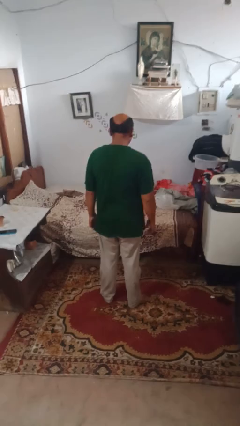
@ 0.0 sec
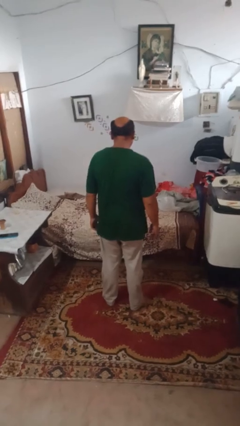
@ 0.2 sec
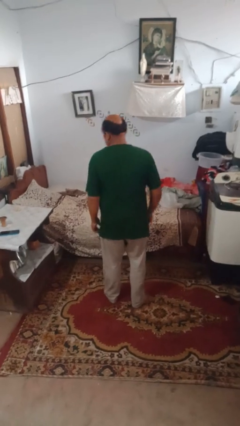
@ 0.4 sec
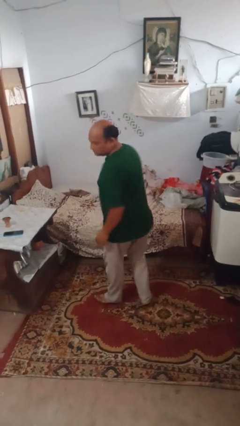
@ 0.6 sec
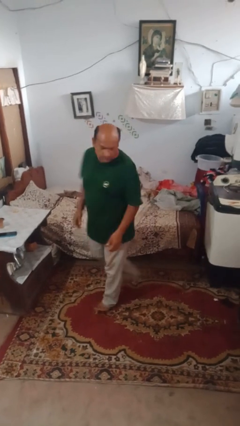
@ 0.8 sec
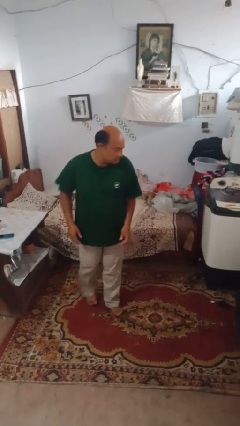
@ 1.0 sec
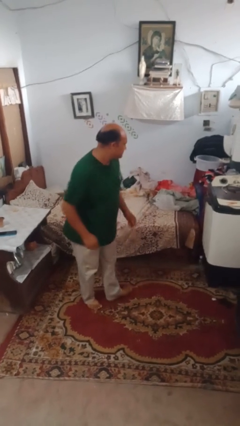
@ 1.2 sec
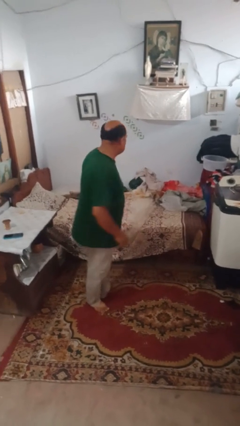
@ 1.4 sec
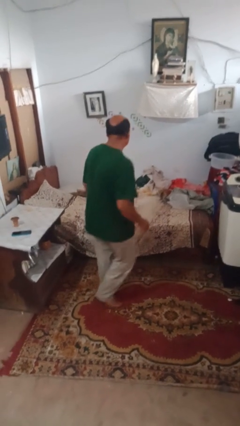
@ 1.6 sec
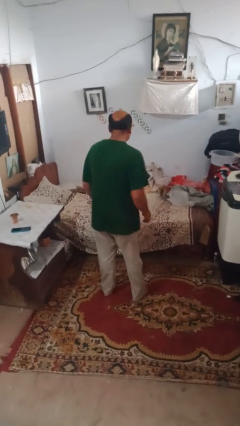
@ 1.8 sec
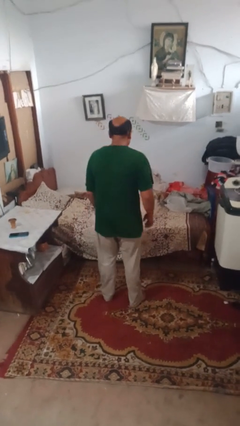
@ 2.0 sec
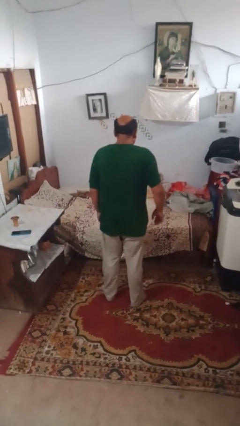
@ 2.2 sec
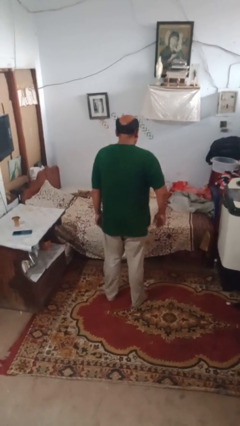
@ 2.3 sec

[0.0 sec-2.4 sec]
person twirls

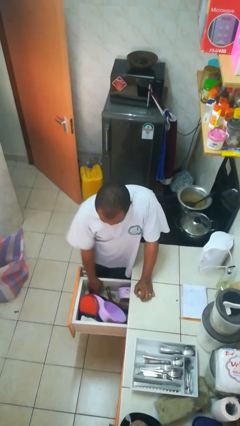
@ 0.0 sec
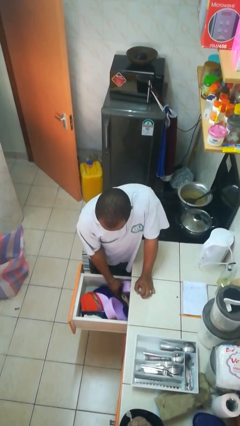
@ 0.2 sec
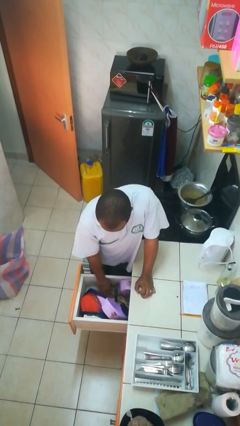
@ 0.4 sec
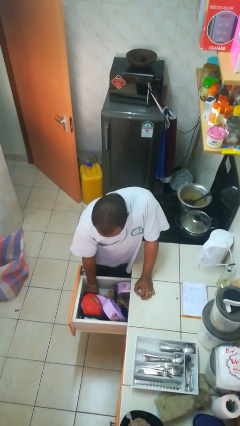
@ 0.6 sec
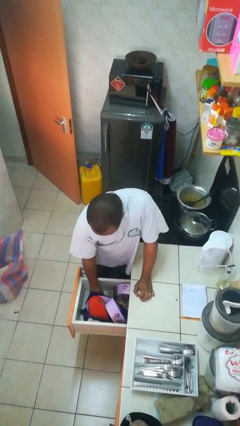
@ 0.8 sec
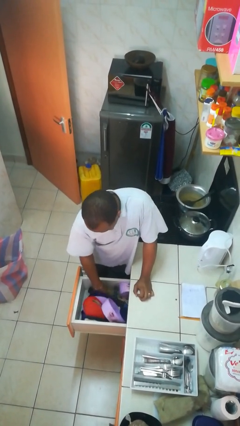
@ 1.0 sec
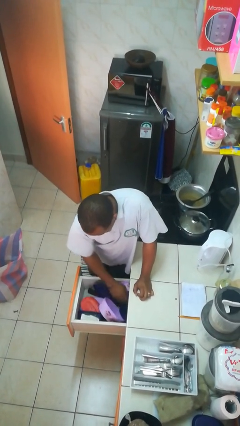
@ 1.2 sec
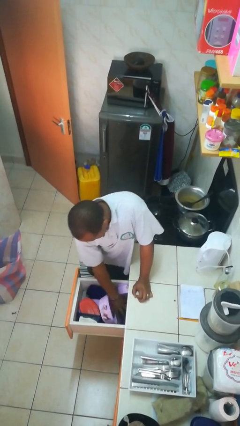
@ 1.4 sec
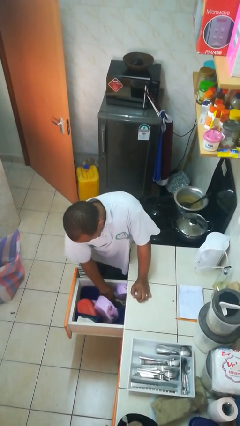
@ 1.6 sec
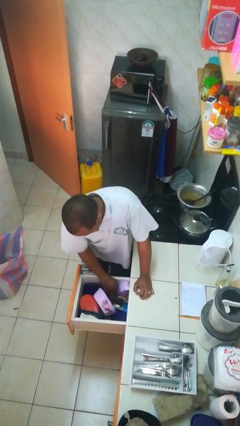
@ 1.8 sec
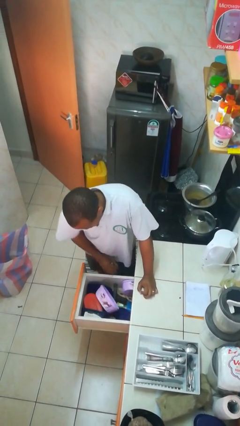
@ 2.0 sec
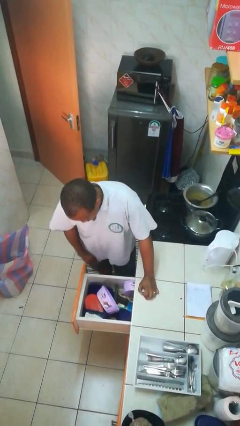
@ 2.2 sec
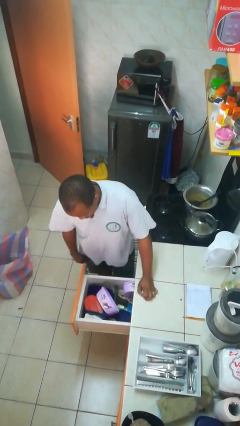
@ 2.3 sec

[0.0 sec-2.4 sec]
person searches in kitchen drawer

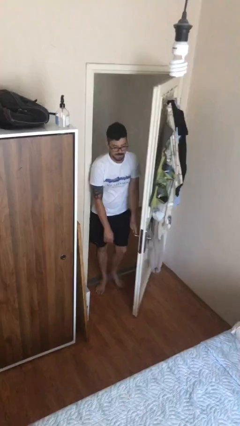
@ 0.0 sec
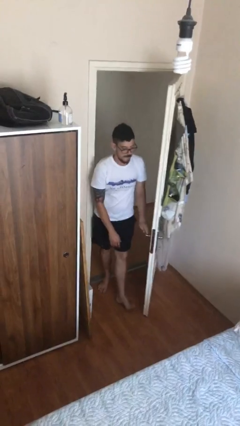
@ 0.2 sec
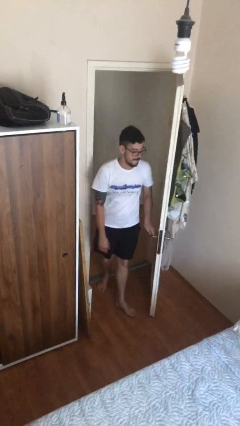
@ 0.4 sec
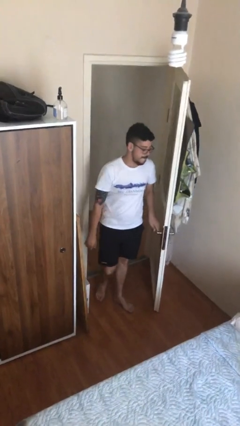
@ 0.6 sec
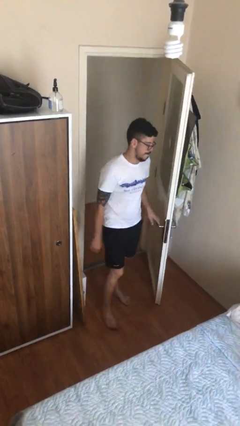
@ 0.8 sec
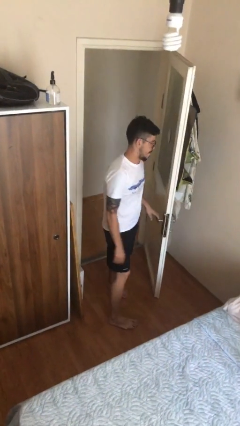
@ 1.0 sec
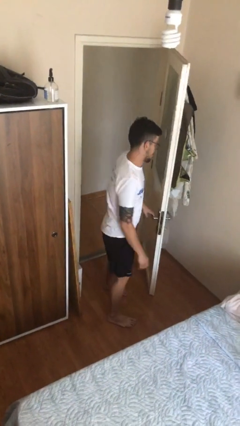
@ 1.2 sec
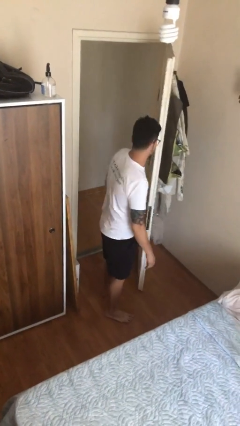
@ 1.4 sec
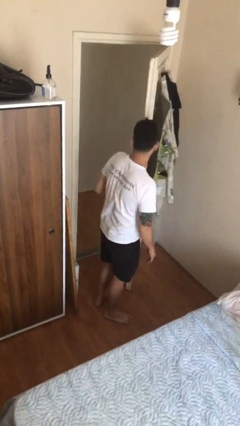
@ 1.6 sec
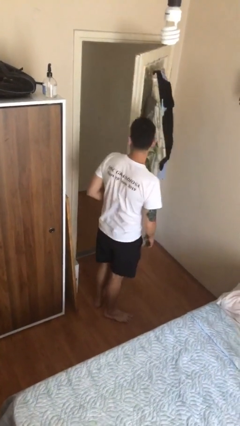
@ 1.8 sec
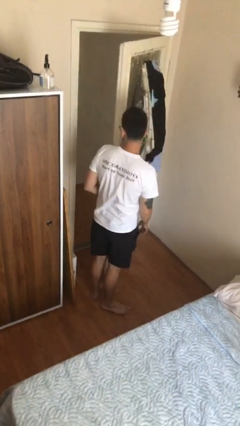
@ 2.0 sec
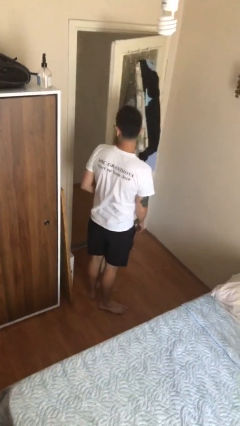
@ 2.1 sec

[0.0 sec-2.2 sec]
person enters scene through structure

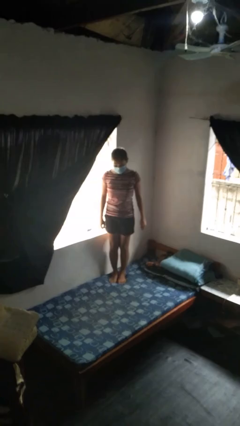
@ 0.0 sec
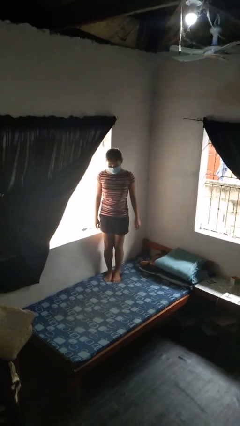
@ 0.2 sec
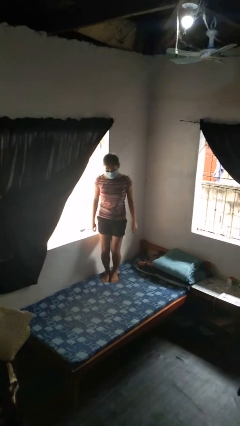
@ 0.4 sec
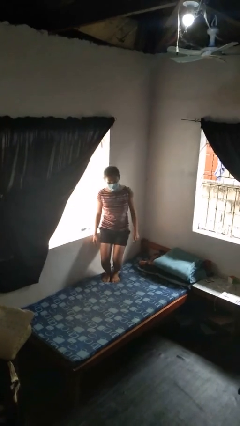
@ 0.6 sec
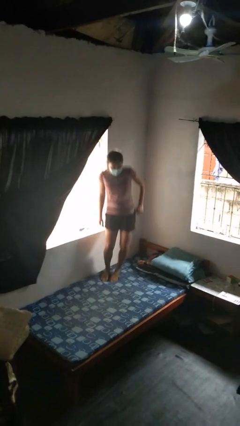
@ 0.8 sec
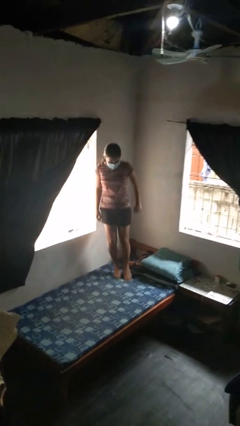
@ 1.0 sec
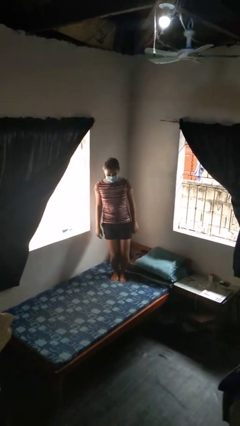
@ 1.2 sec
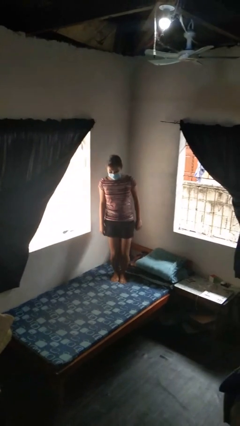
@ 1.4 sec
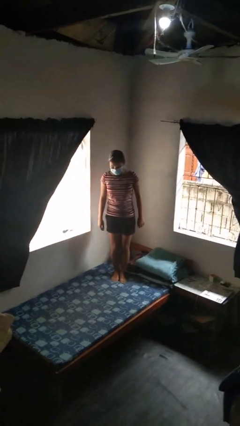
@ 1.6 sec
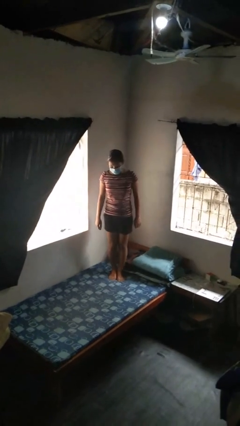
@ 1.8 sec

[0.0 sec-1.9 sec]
person jumps on bed

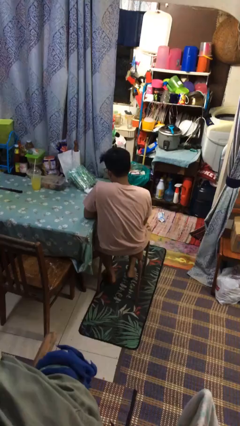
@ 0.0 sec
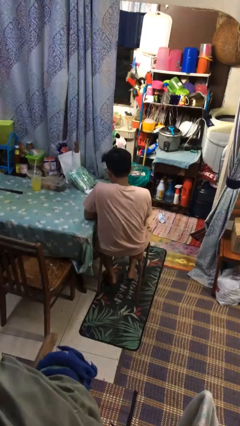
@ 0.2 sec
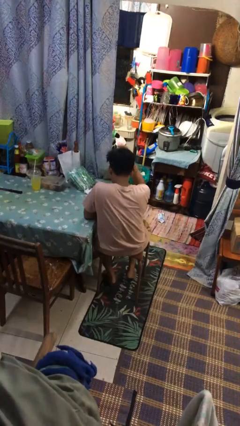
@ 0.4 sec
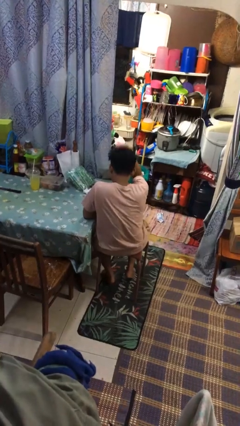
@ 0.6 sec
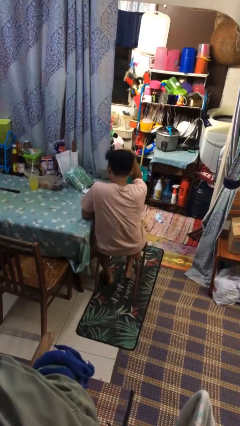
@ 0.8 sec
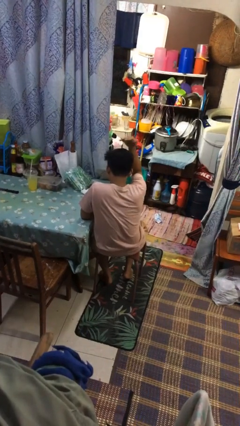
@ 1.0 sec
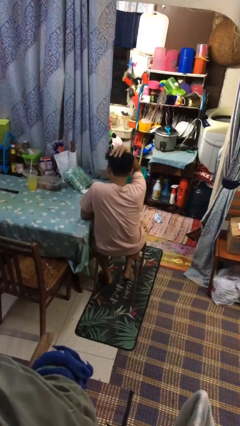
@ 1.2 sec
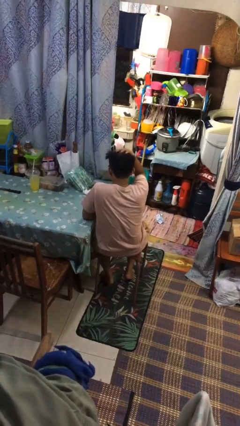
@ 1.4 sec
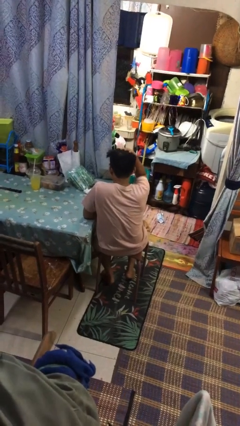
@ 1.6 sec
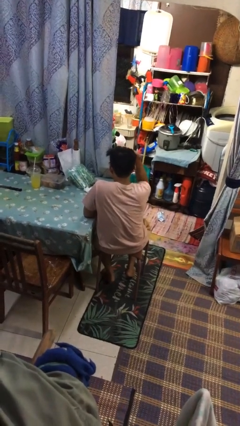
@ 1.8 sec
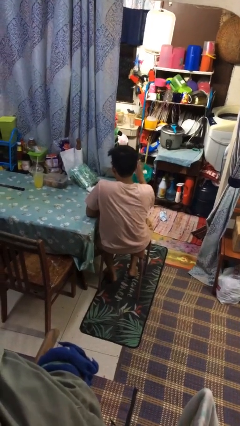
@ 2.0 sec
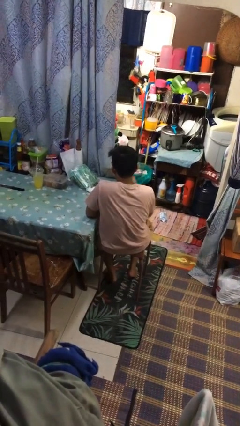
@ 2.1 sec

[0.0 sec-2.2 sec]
person pats head

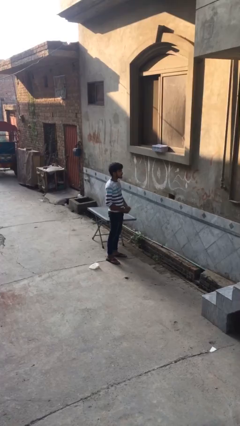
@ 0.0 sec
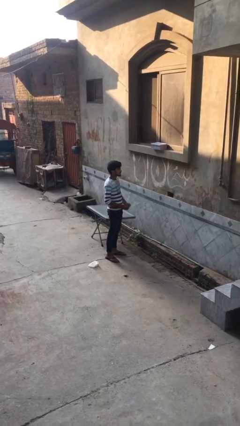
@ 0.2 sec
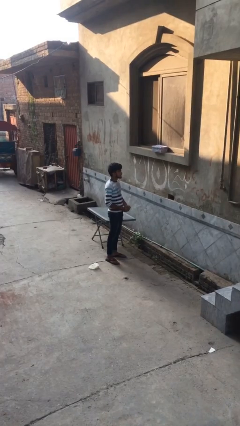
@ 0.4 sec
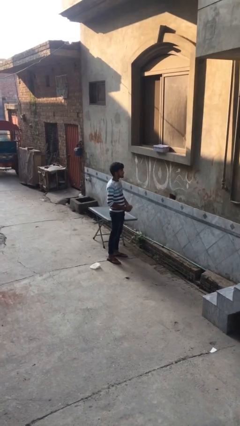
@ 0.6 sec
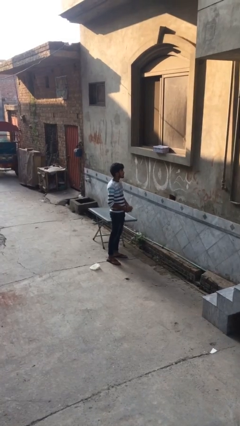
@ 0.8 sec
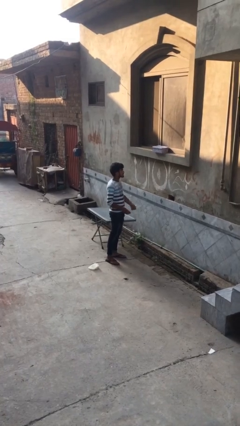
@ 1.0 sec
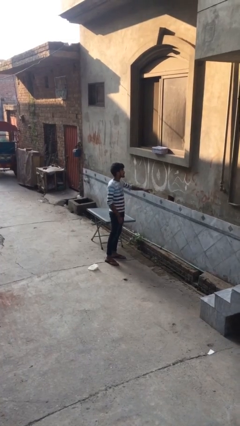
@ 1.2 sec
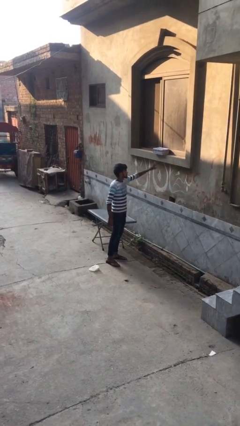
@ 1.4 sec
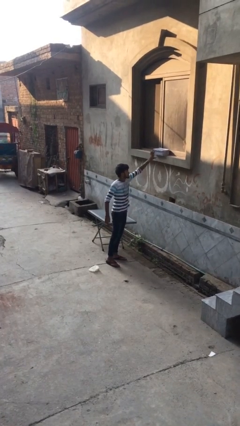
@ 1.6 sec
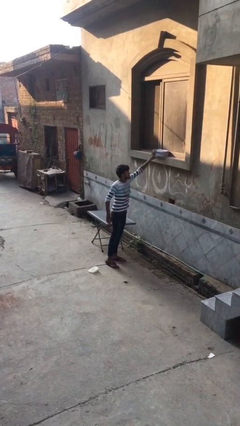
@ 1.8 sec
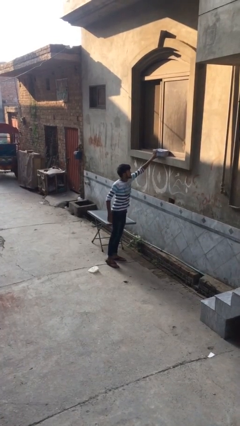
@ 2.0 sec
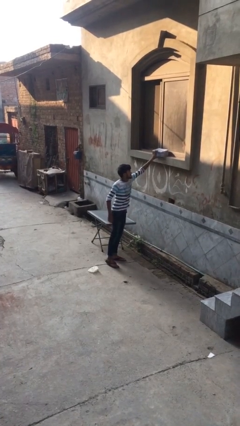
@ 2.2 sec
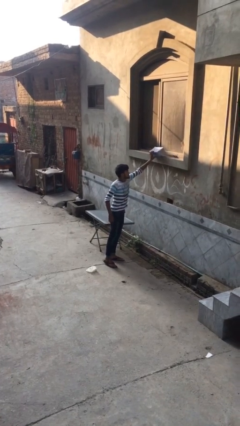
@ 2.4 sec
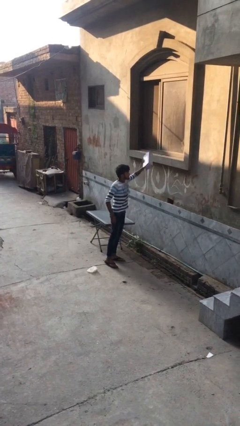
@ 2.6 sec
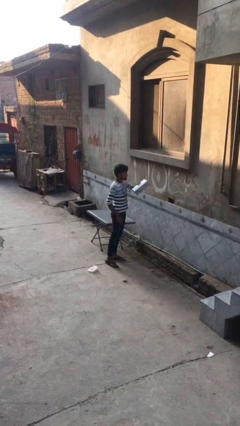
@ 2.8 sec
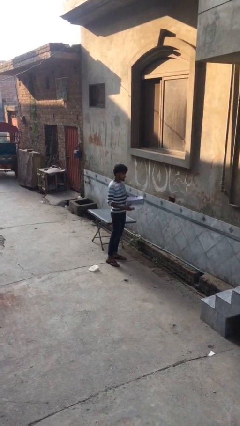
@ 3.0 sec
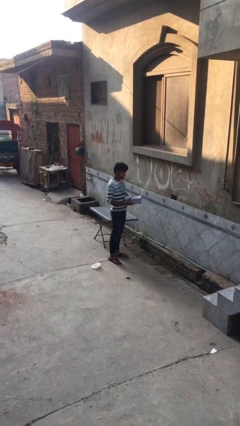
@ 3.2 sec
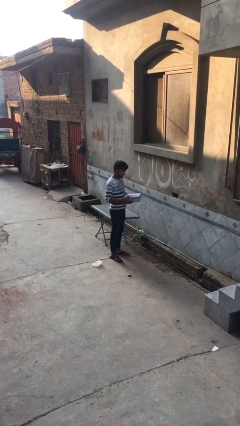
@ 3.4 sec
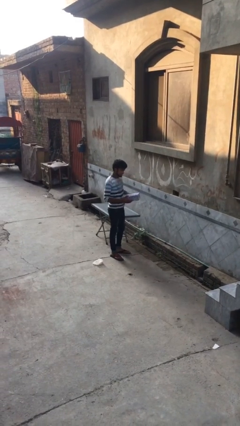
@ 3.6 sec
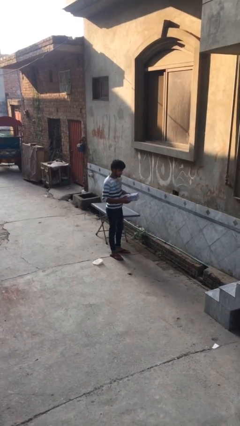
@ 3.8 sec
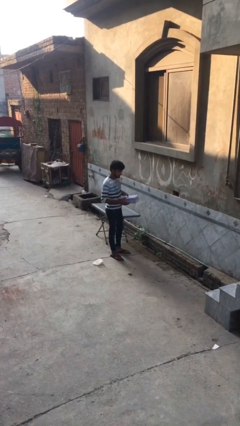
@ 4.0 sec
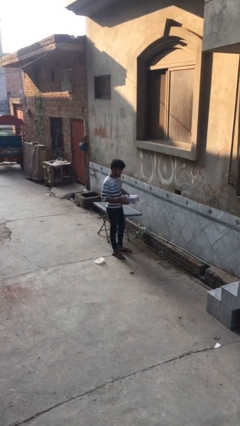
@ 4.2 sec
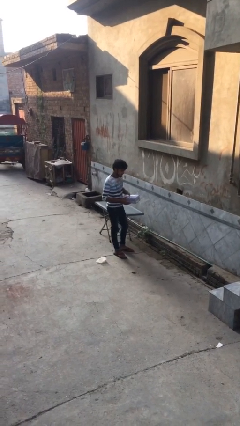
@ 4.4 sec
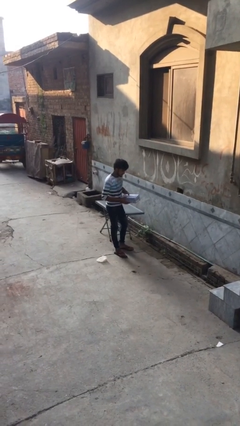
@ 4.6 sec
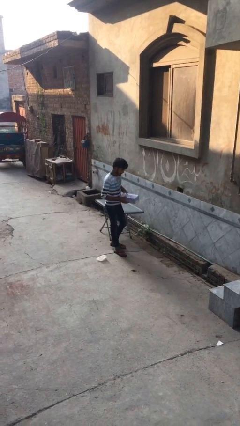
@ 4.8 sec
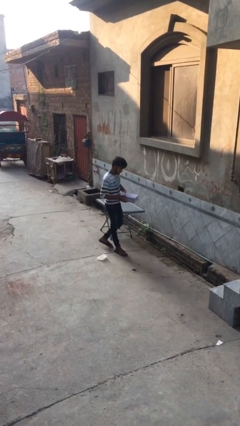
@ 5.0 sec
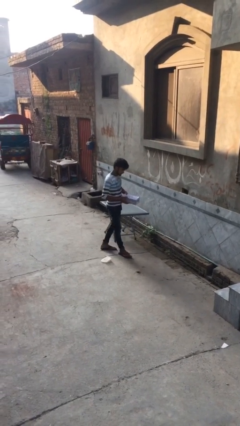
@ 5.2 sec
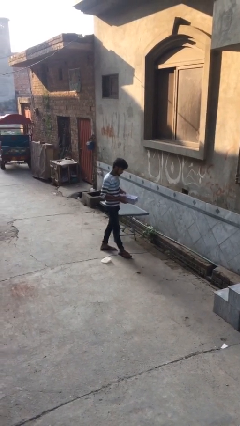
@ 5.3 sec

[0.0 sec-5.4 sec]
person picks up object from shelf

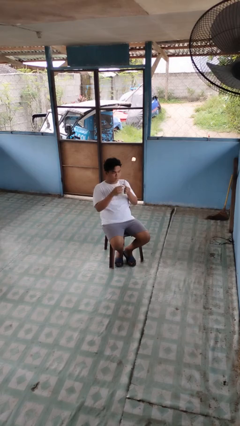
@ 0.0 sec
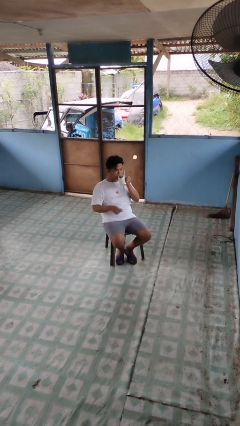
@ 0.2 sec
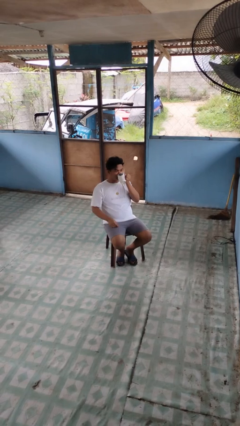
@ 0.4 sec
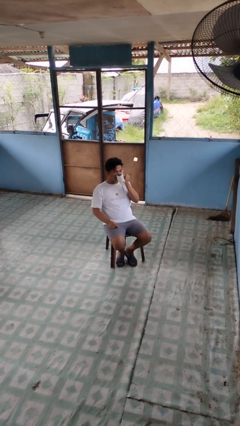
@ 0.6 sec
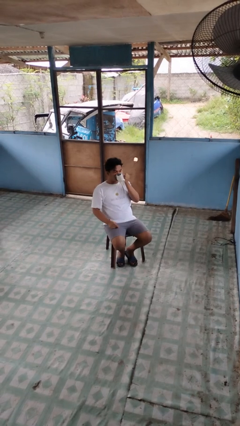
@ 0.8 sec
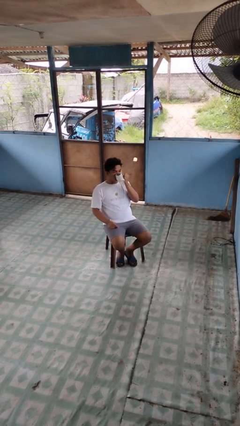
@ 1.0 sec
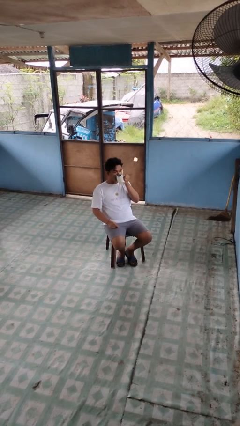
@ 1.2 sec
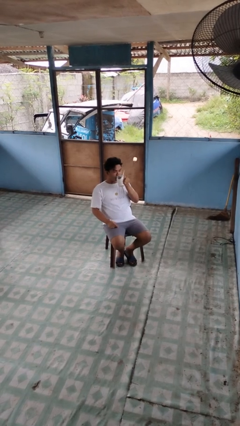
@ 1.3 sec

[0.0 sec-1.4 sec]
person drinks from mug
